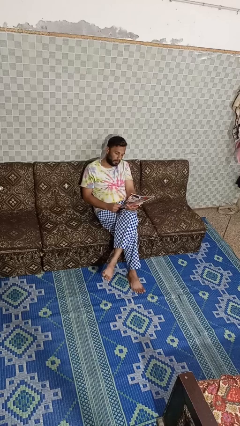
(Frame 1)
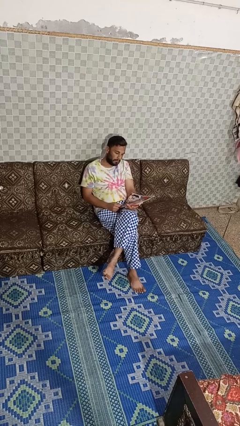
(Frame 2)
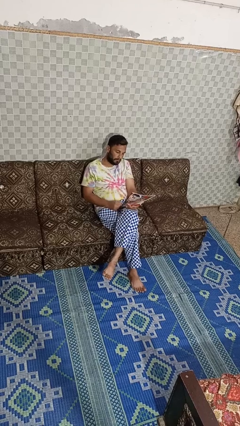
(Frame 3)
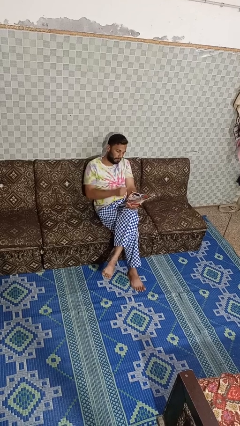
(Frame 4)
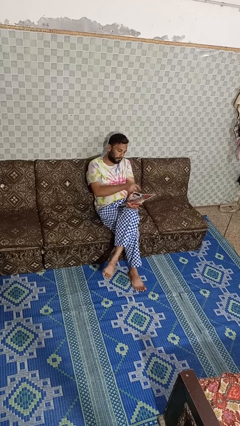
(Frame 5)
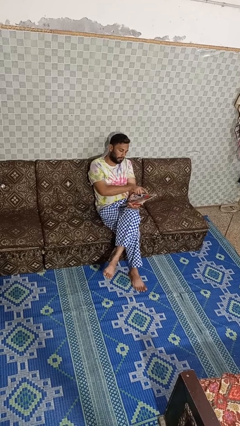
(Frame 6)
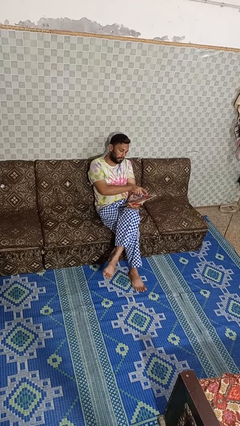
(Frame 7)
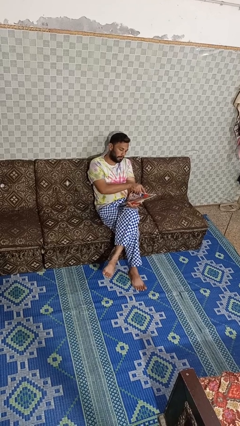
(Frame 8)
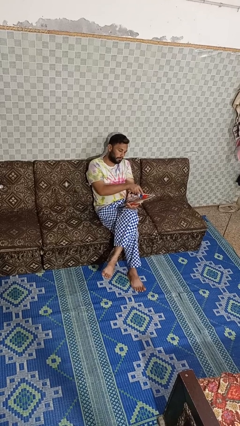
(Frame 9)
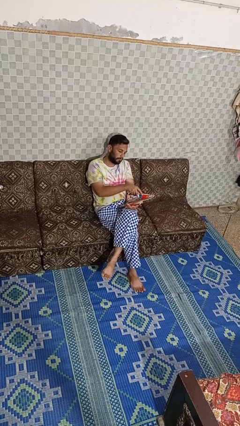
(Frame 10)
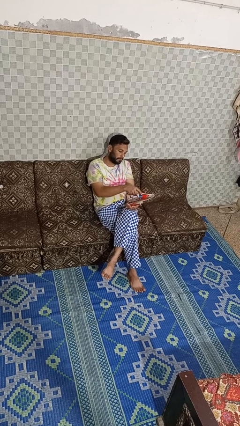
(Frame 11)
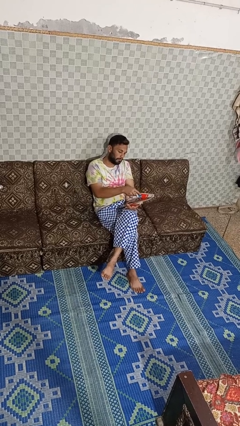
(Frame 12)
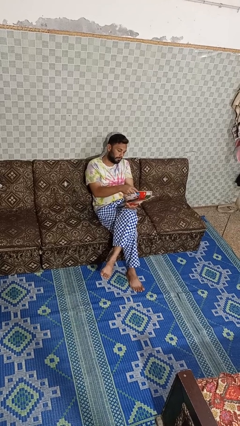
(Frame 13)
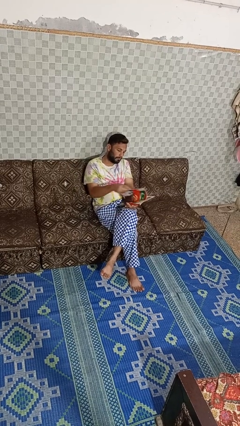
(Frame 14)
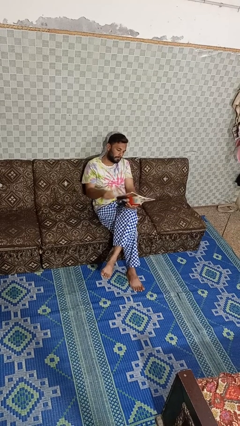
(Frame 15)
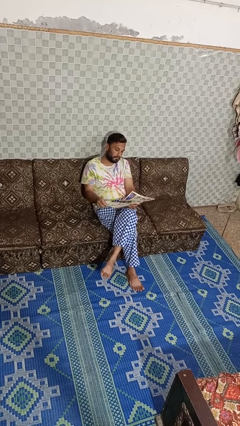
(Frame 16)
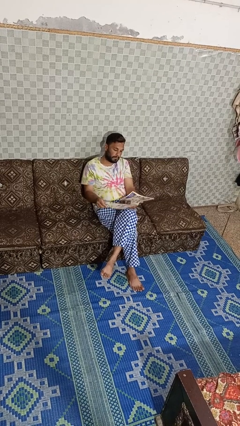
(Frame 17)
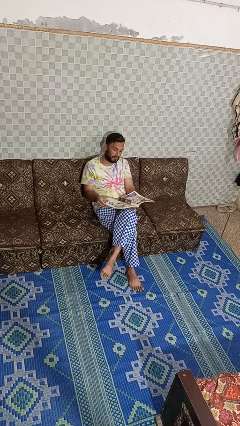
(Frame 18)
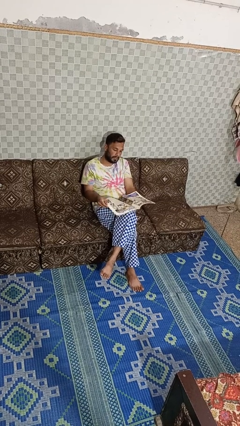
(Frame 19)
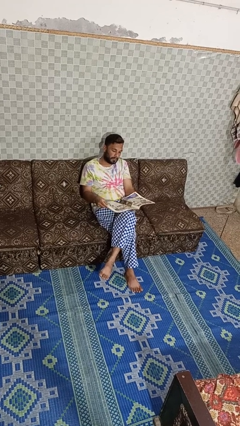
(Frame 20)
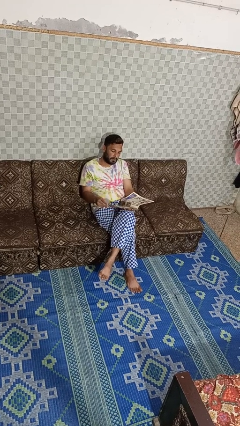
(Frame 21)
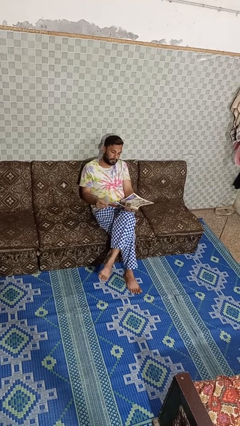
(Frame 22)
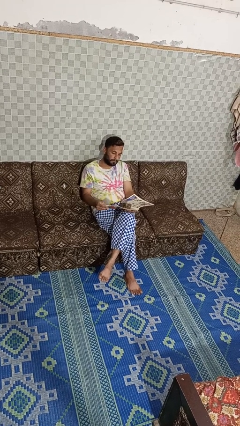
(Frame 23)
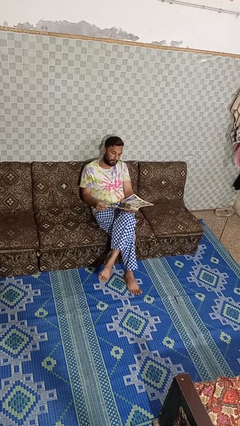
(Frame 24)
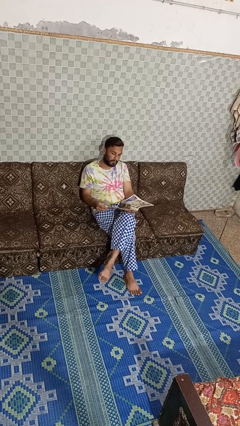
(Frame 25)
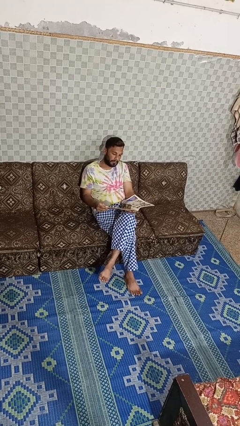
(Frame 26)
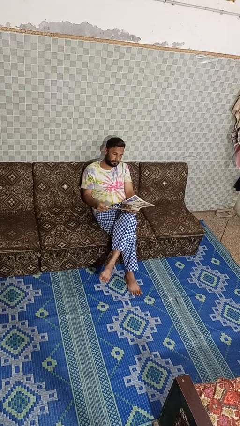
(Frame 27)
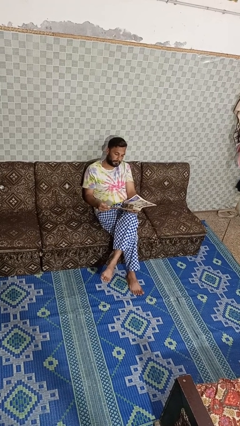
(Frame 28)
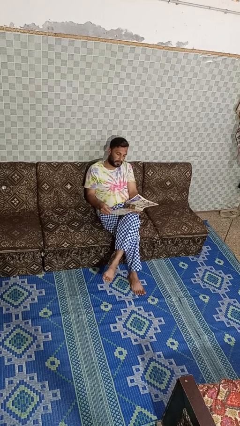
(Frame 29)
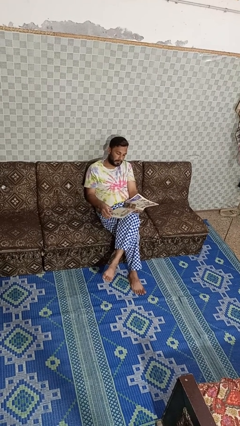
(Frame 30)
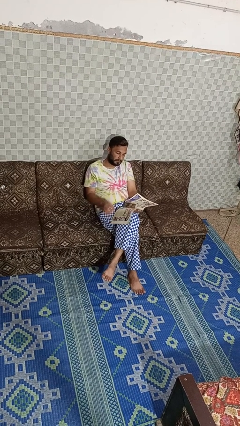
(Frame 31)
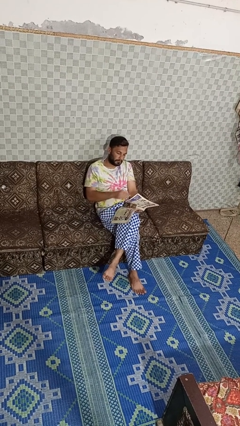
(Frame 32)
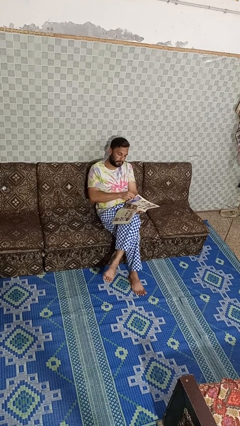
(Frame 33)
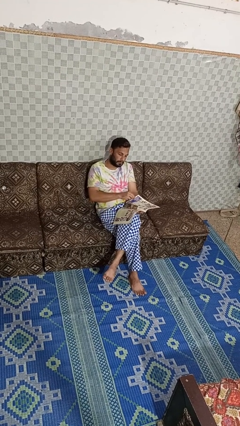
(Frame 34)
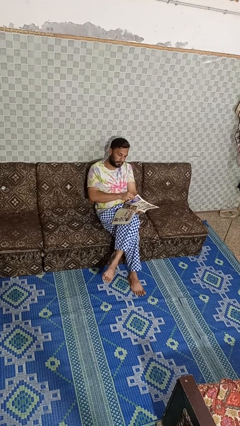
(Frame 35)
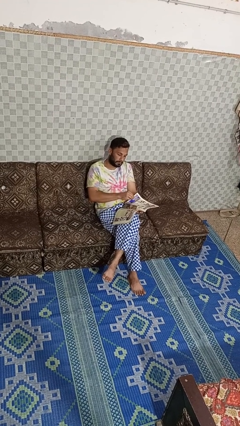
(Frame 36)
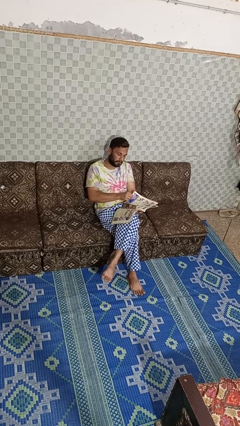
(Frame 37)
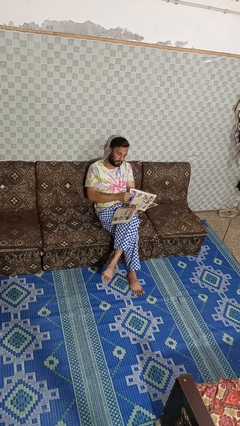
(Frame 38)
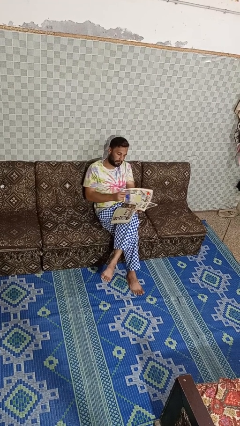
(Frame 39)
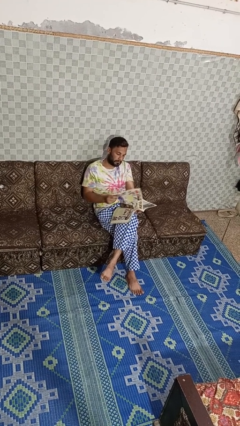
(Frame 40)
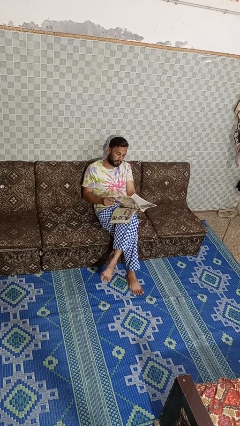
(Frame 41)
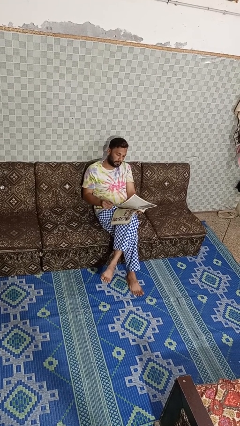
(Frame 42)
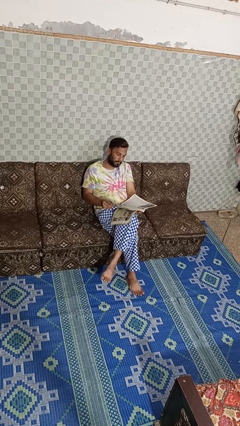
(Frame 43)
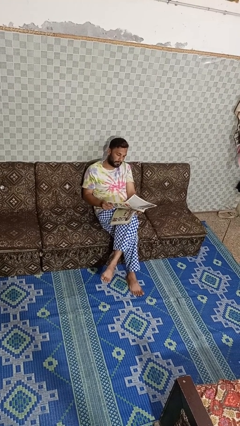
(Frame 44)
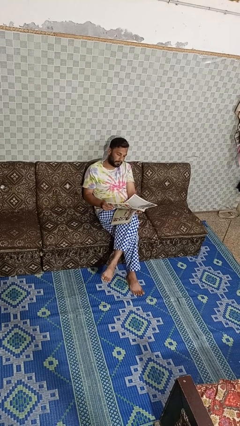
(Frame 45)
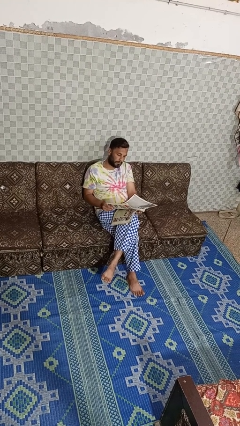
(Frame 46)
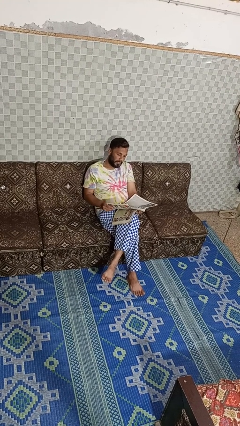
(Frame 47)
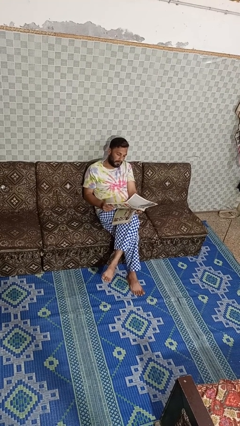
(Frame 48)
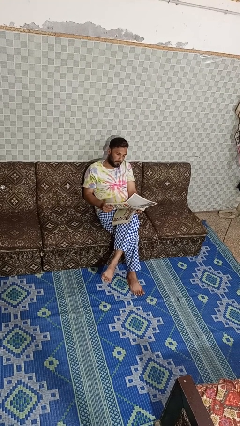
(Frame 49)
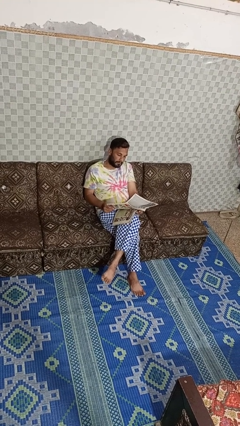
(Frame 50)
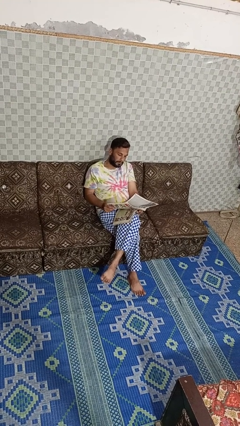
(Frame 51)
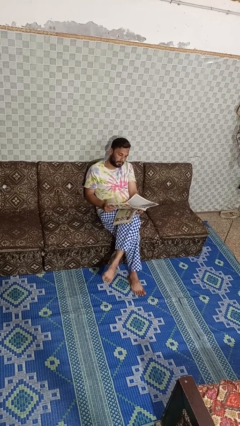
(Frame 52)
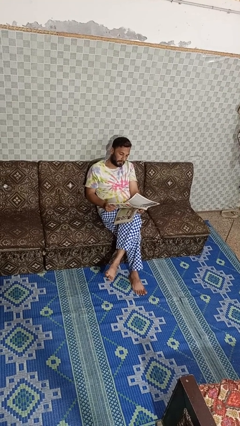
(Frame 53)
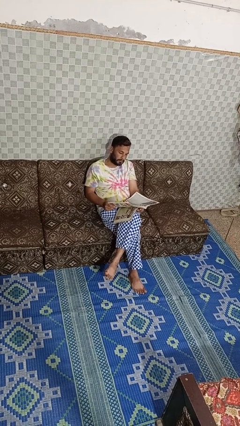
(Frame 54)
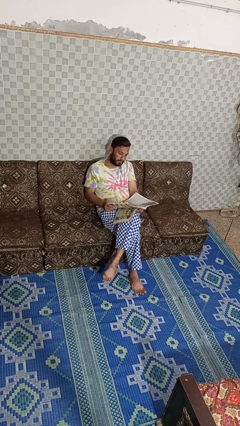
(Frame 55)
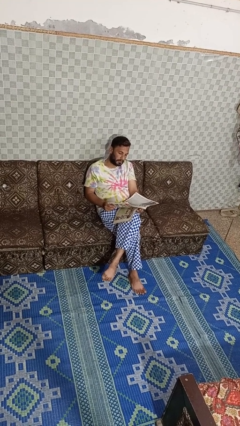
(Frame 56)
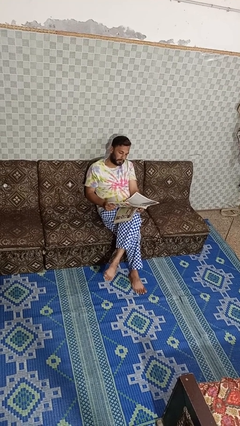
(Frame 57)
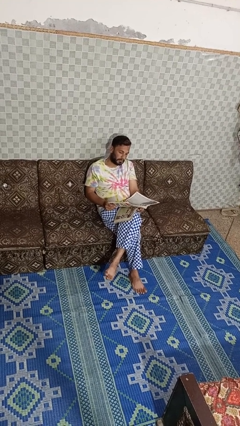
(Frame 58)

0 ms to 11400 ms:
person reads magazine

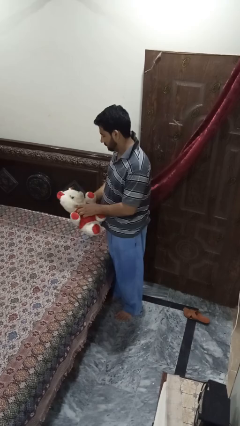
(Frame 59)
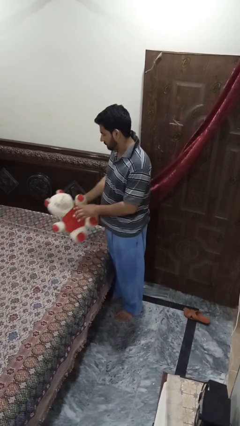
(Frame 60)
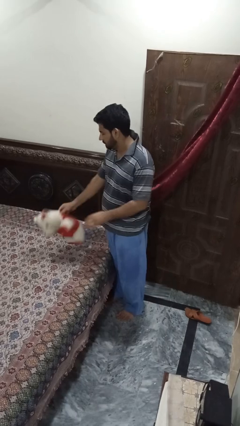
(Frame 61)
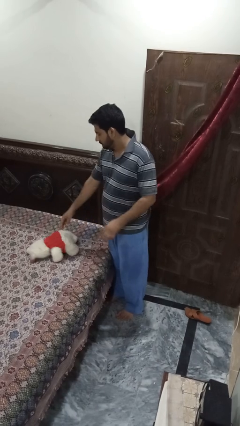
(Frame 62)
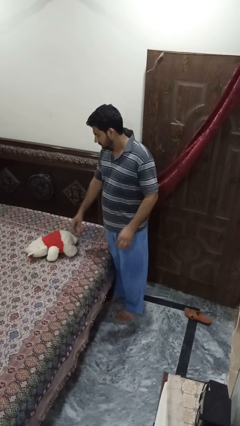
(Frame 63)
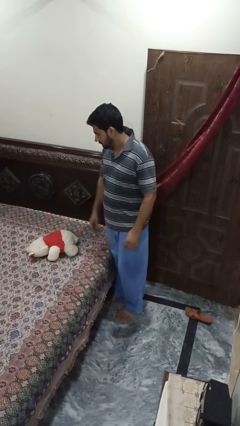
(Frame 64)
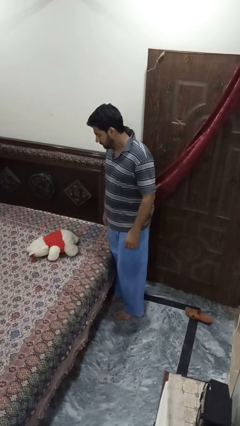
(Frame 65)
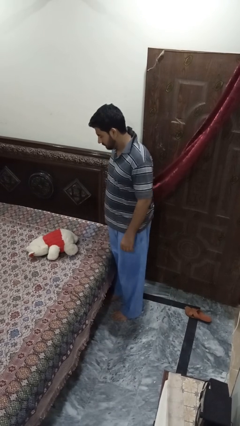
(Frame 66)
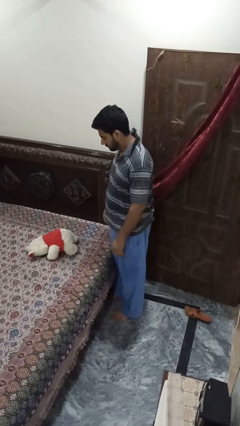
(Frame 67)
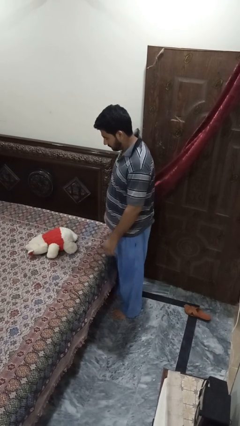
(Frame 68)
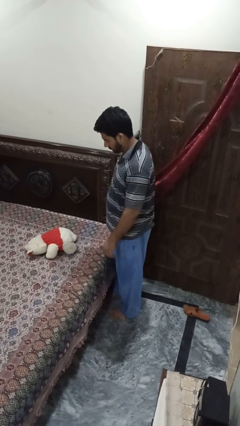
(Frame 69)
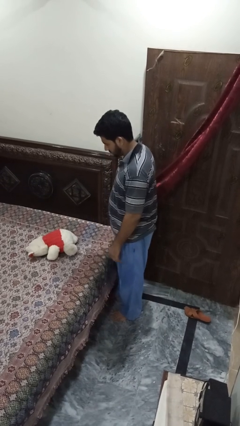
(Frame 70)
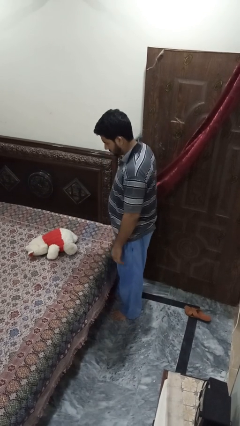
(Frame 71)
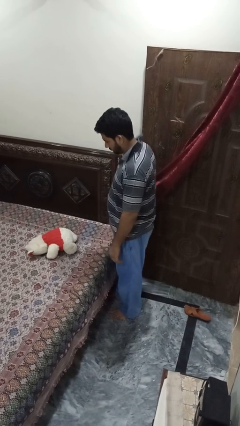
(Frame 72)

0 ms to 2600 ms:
person puts down object on bed

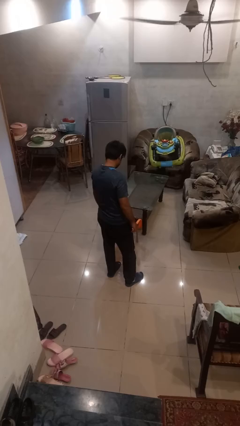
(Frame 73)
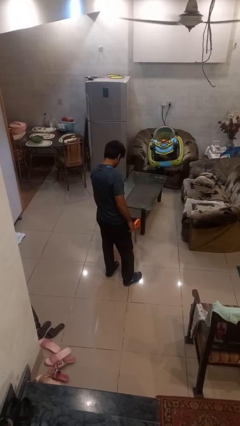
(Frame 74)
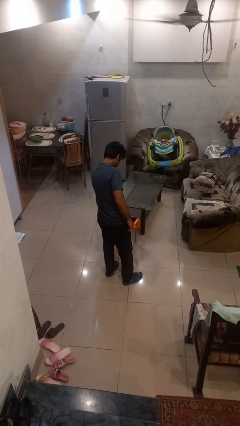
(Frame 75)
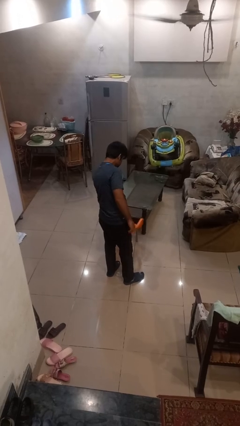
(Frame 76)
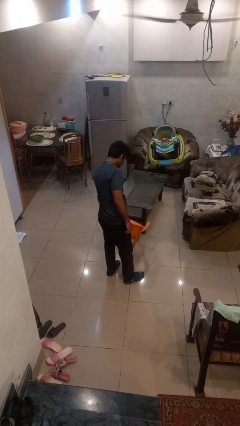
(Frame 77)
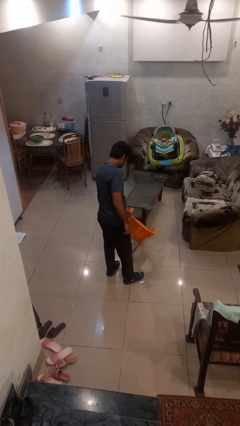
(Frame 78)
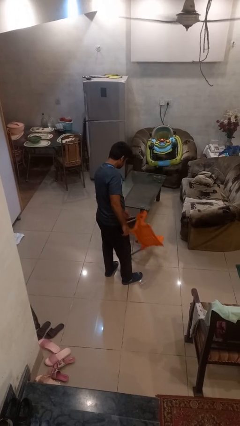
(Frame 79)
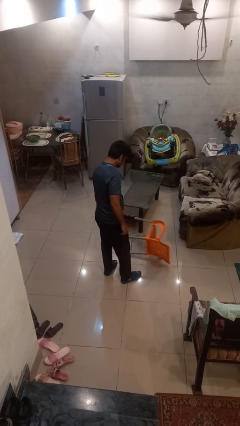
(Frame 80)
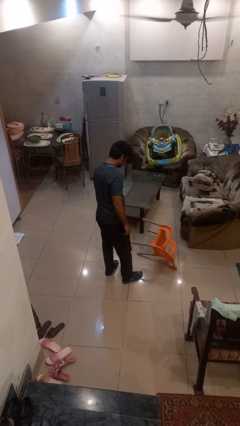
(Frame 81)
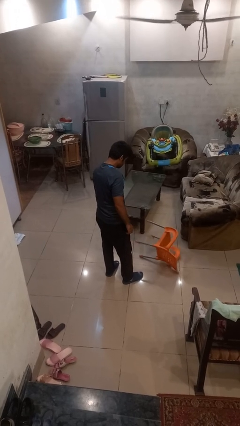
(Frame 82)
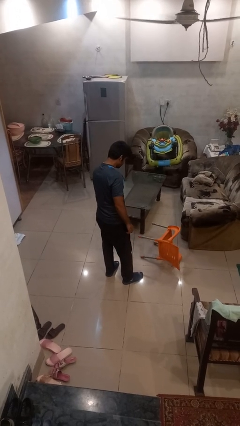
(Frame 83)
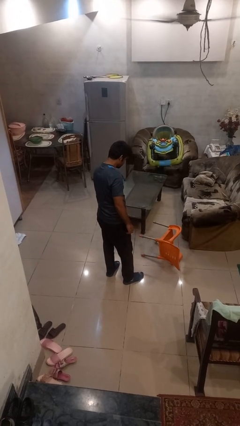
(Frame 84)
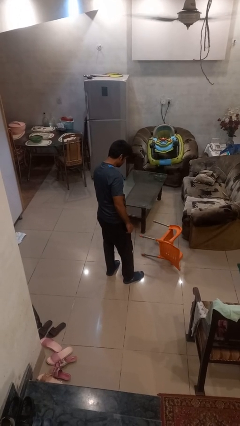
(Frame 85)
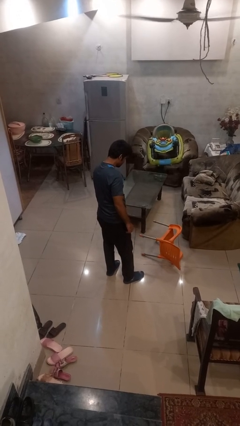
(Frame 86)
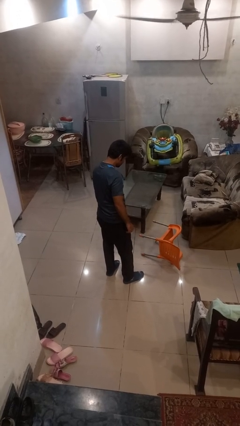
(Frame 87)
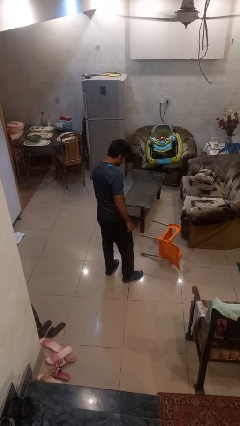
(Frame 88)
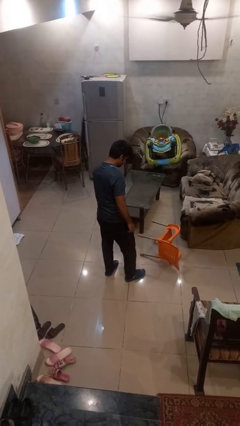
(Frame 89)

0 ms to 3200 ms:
person knocks over furniture

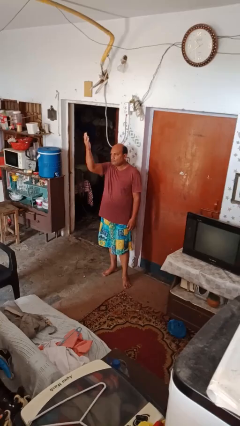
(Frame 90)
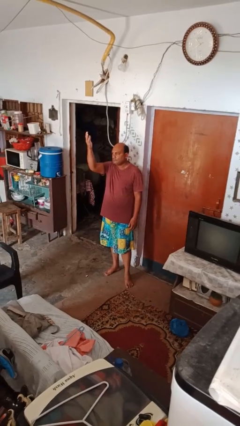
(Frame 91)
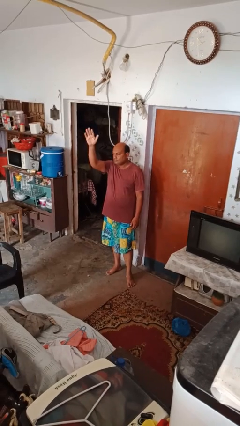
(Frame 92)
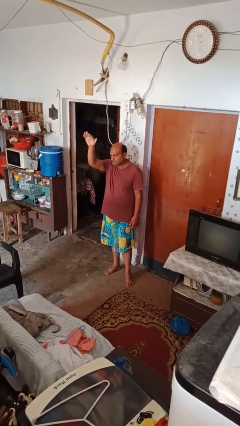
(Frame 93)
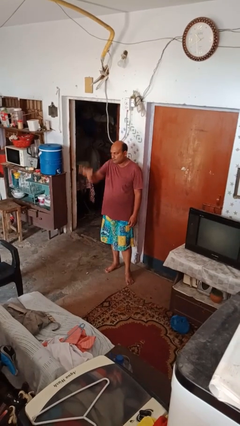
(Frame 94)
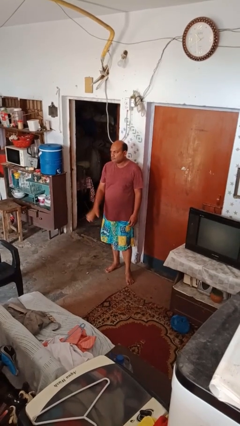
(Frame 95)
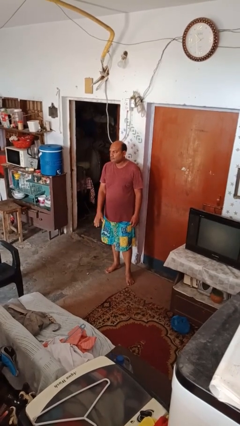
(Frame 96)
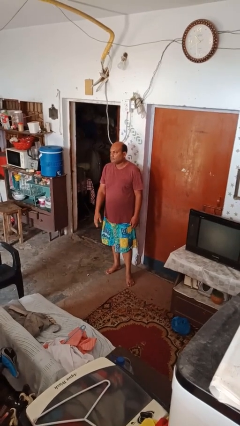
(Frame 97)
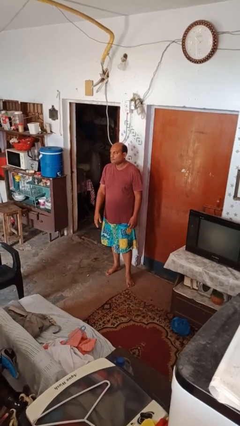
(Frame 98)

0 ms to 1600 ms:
person gestures lower hand
